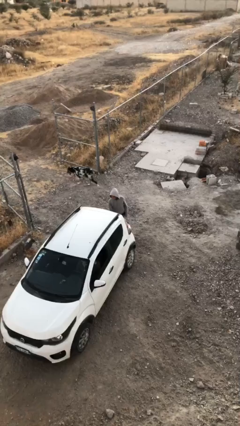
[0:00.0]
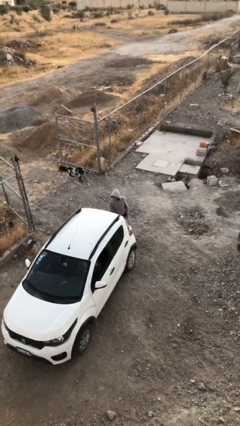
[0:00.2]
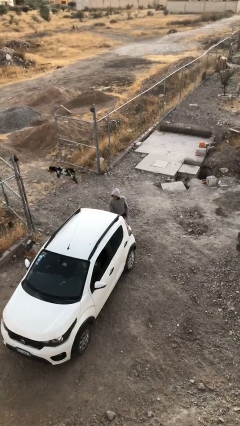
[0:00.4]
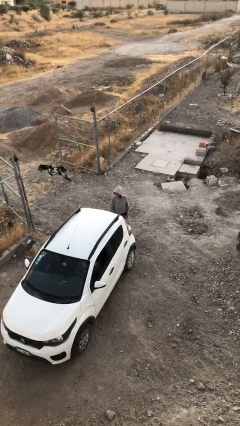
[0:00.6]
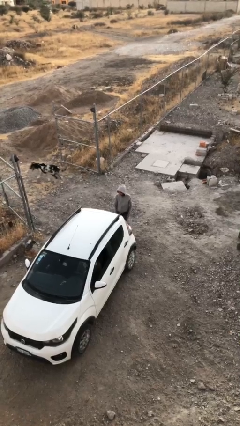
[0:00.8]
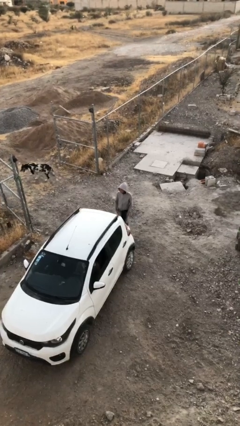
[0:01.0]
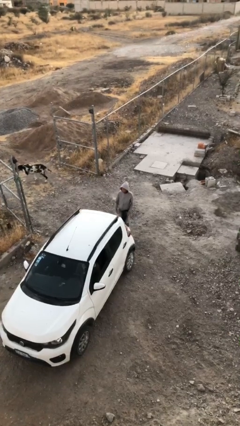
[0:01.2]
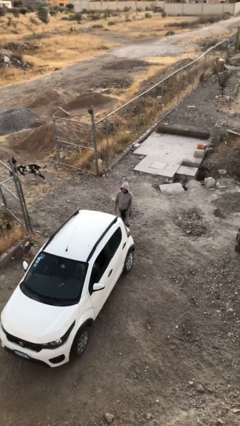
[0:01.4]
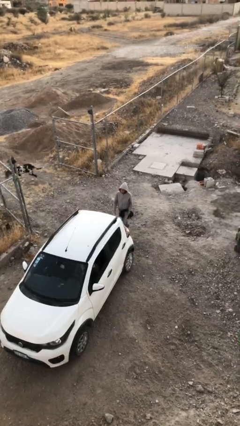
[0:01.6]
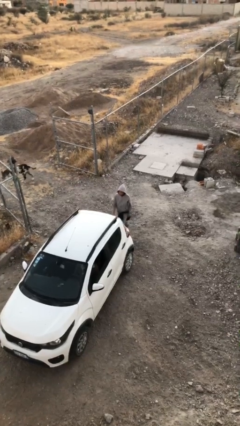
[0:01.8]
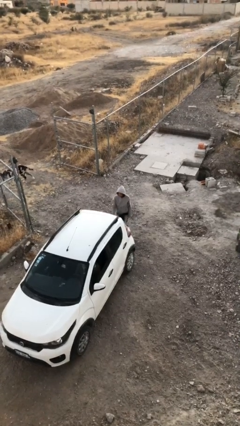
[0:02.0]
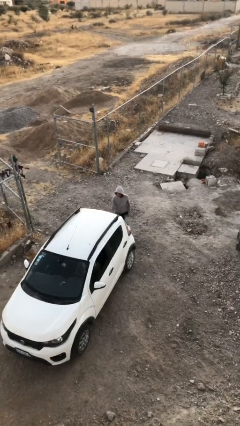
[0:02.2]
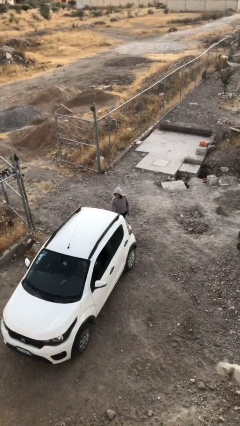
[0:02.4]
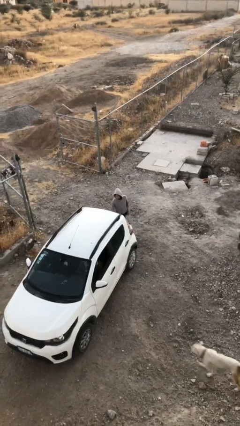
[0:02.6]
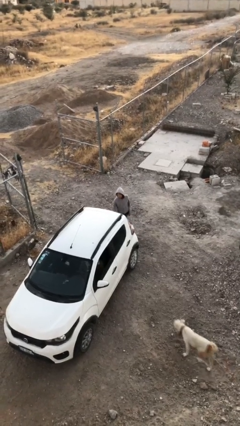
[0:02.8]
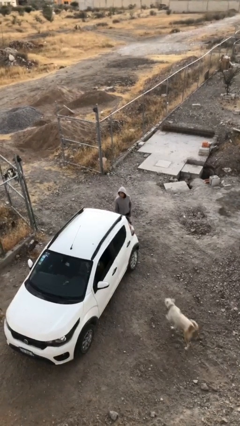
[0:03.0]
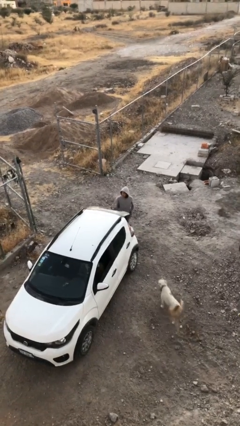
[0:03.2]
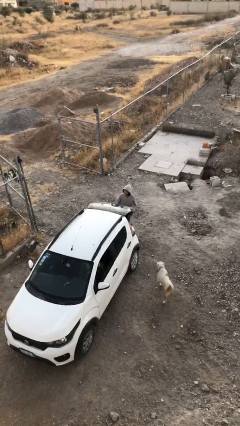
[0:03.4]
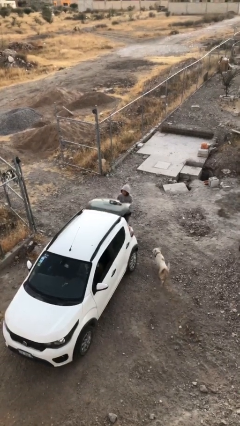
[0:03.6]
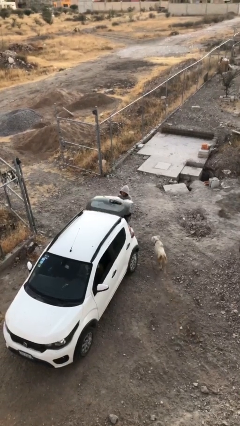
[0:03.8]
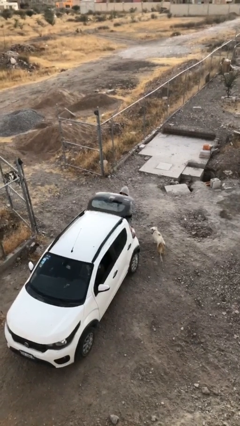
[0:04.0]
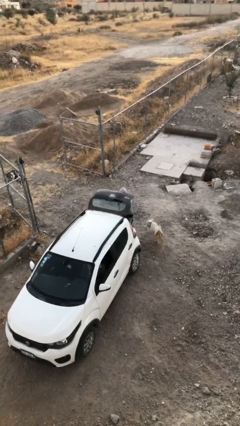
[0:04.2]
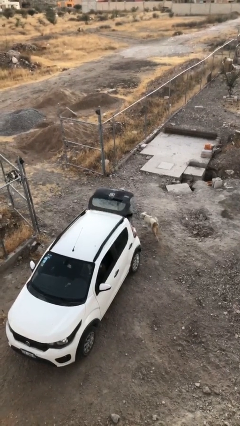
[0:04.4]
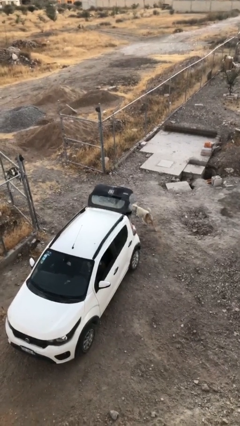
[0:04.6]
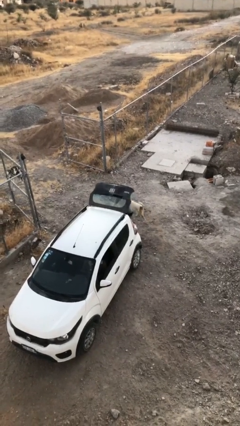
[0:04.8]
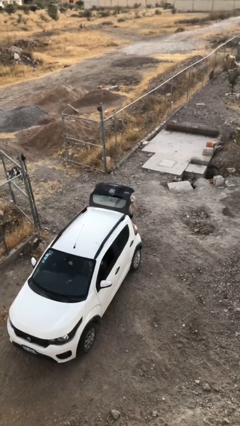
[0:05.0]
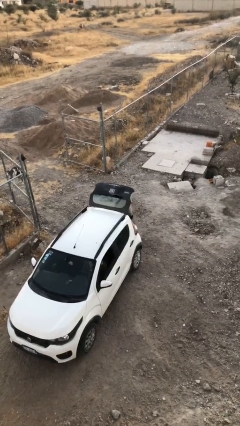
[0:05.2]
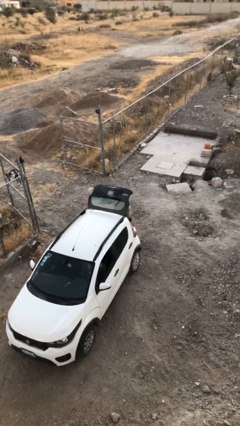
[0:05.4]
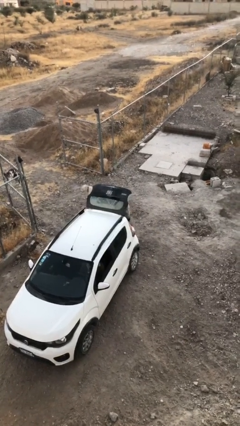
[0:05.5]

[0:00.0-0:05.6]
person opens car trunk

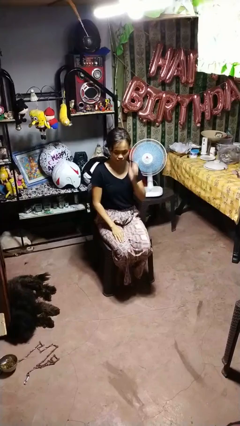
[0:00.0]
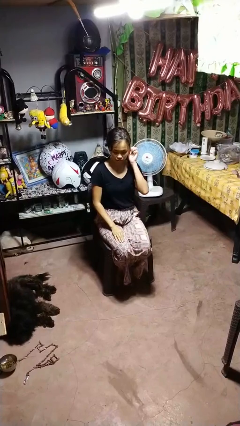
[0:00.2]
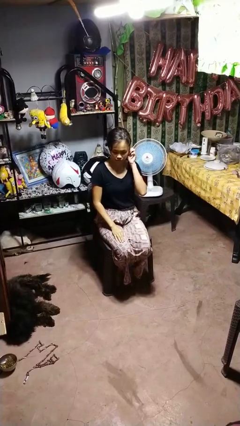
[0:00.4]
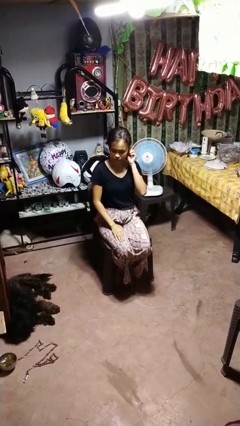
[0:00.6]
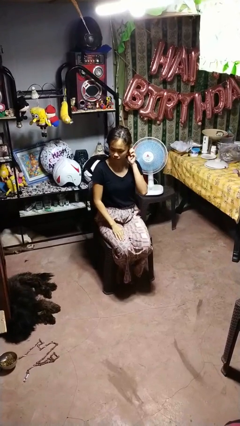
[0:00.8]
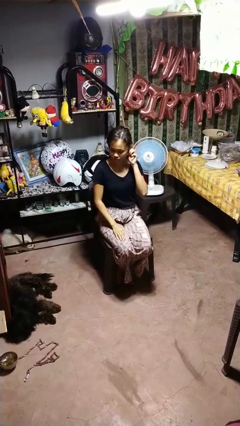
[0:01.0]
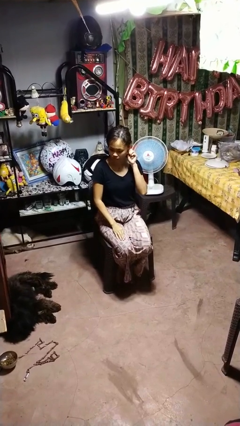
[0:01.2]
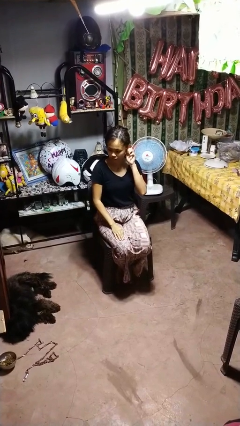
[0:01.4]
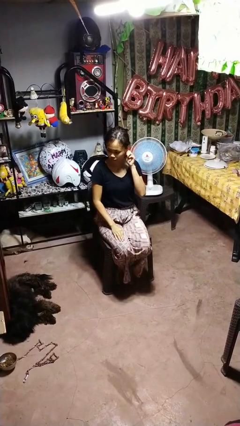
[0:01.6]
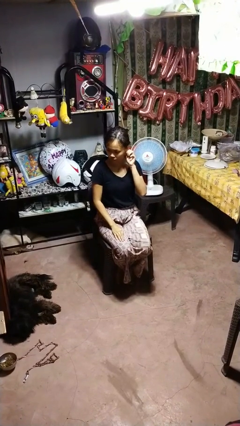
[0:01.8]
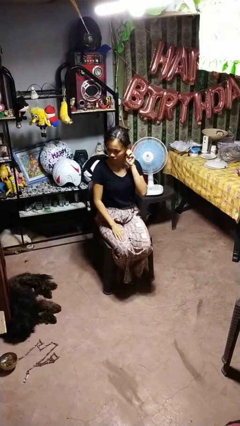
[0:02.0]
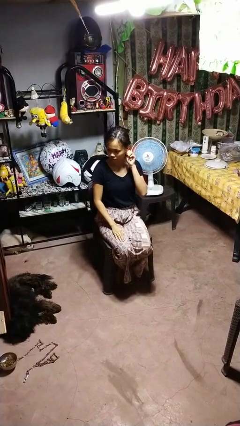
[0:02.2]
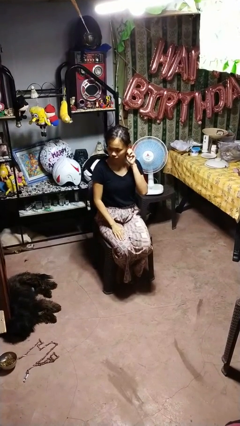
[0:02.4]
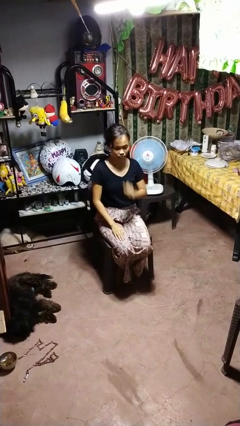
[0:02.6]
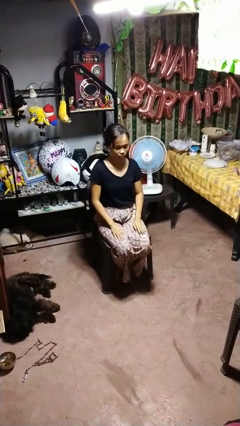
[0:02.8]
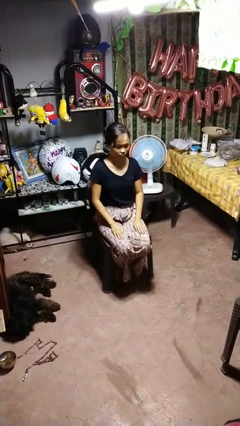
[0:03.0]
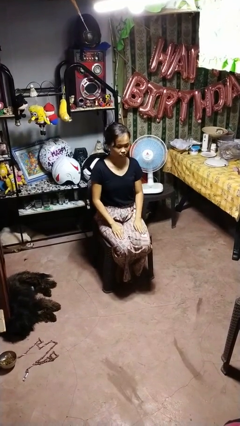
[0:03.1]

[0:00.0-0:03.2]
person touches earlobe

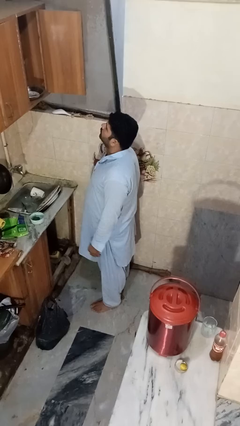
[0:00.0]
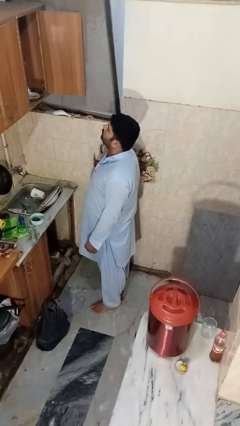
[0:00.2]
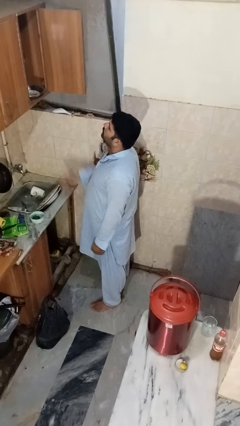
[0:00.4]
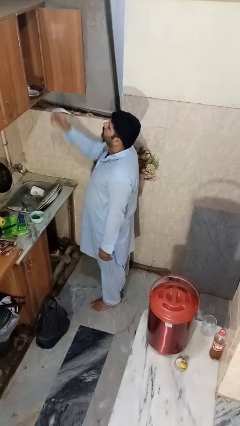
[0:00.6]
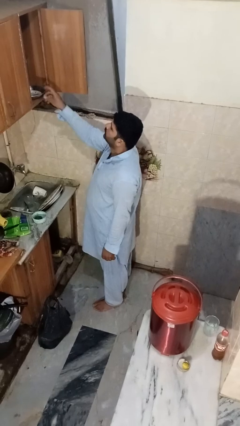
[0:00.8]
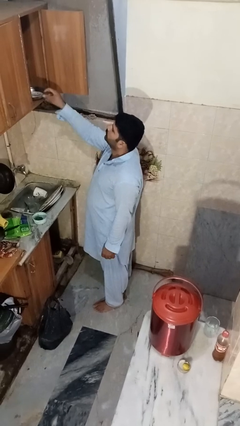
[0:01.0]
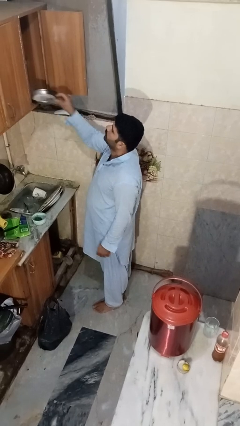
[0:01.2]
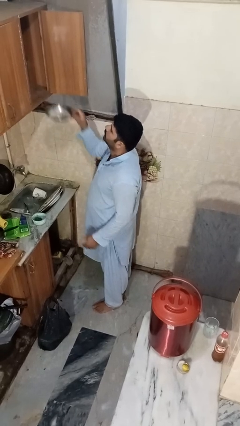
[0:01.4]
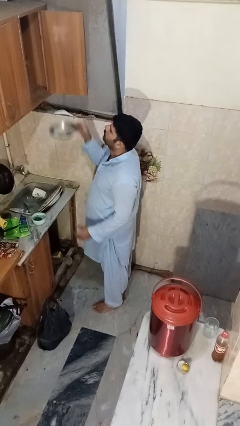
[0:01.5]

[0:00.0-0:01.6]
person takes object from cabinet

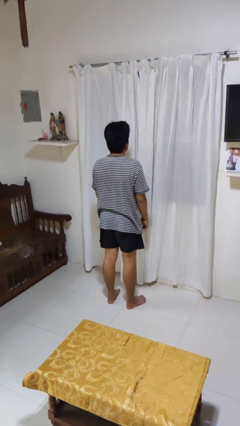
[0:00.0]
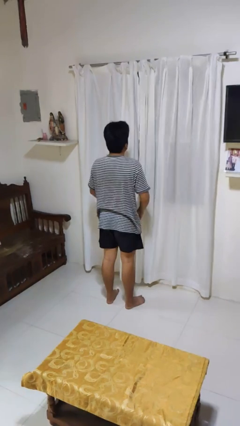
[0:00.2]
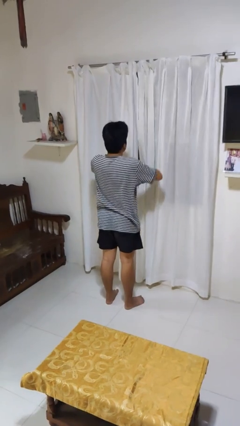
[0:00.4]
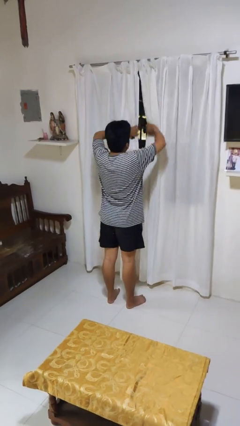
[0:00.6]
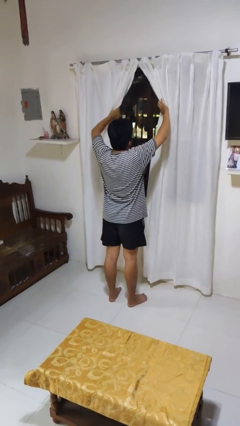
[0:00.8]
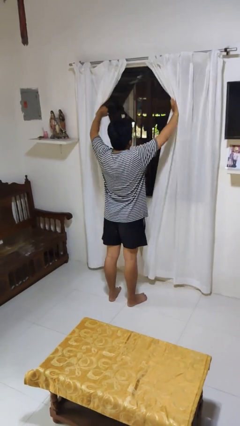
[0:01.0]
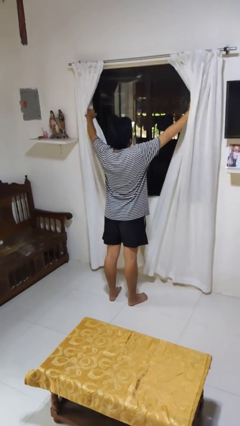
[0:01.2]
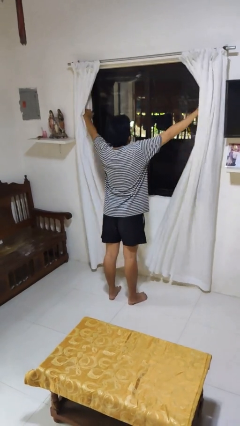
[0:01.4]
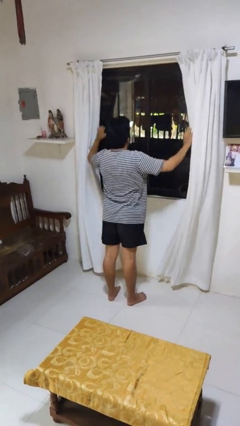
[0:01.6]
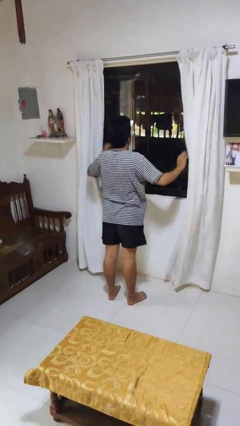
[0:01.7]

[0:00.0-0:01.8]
person opens curtains

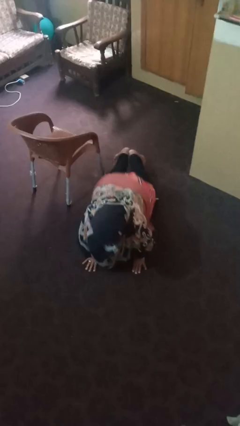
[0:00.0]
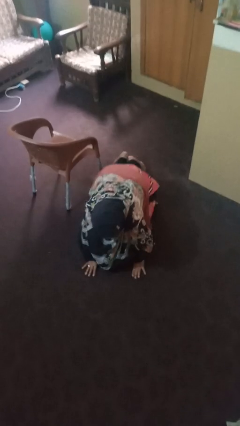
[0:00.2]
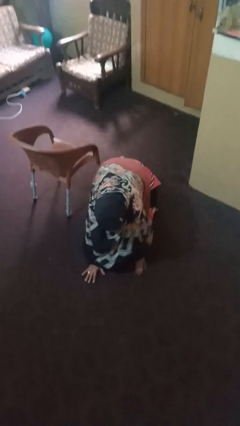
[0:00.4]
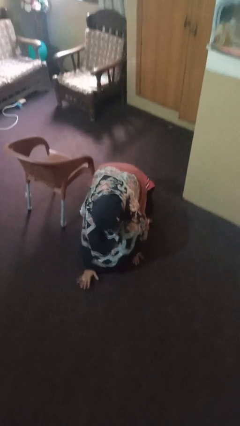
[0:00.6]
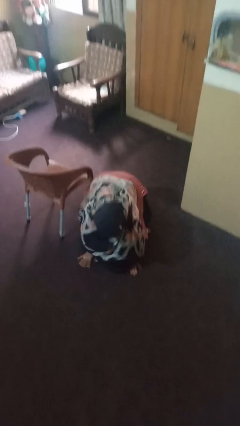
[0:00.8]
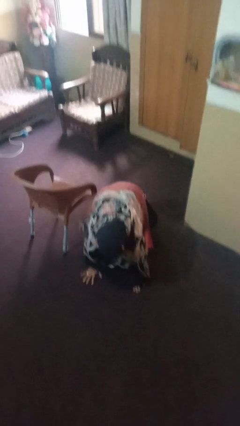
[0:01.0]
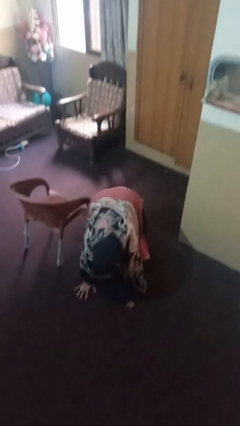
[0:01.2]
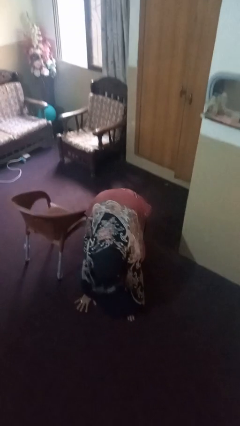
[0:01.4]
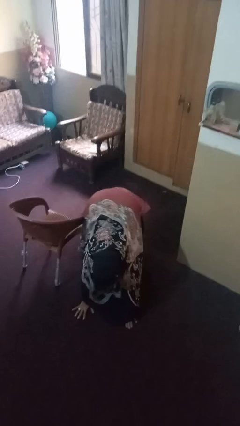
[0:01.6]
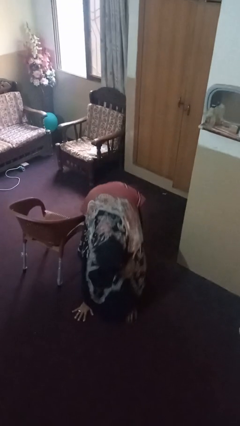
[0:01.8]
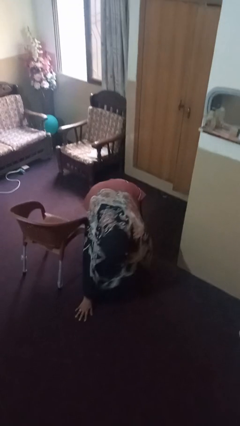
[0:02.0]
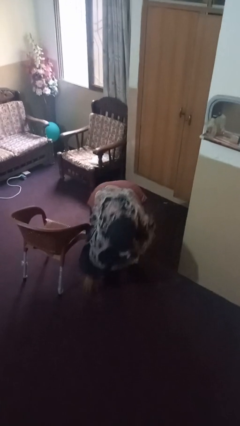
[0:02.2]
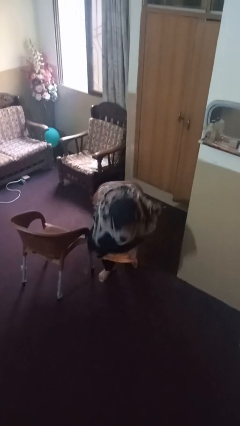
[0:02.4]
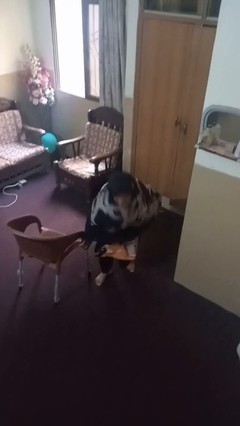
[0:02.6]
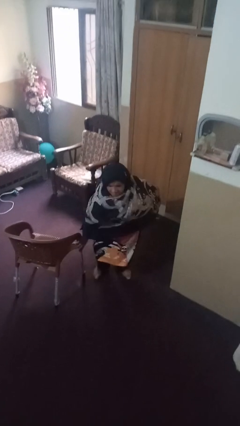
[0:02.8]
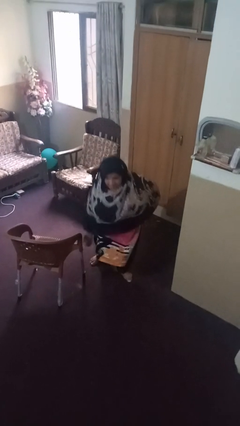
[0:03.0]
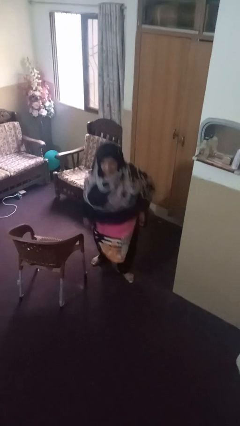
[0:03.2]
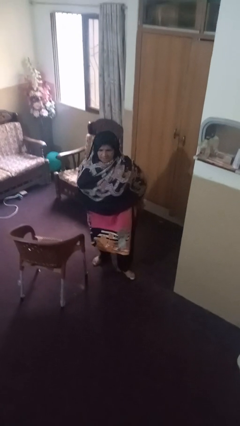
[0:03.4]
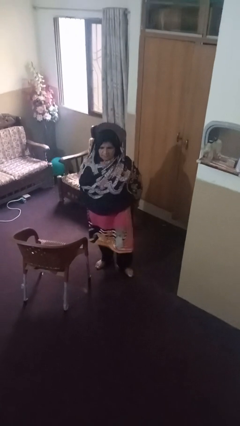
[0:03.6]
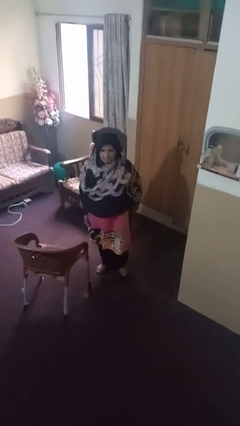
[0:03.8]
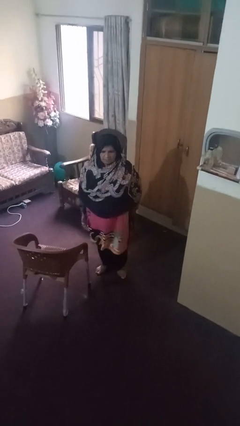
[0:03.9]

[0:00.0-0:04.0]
person stands up from floor

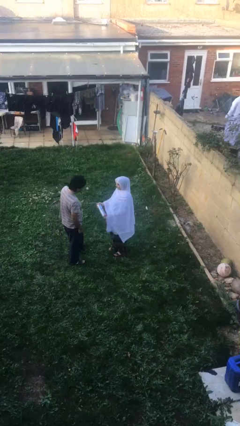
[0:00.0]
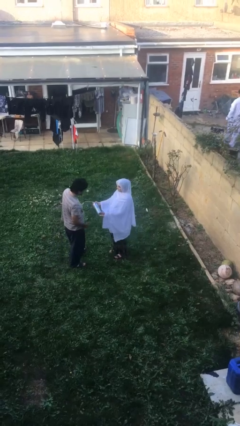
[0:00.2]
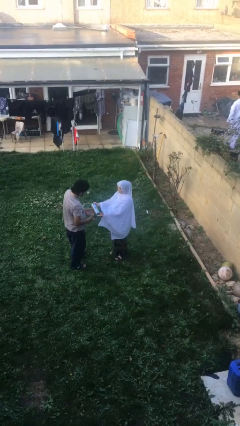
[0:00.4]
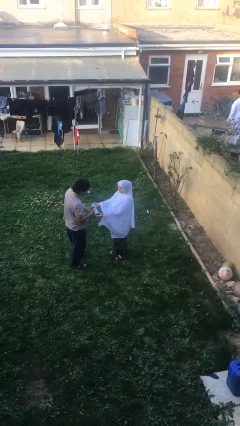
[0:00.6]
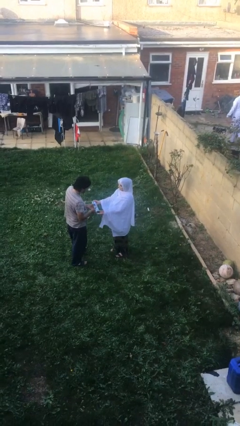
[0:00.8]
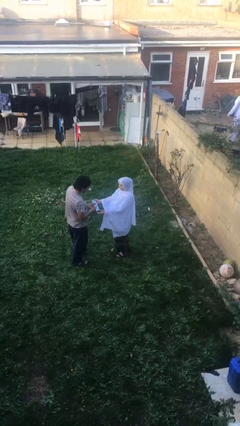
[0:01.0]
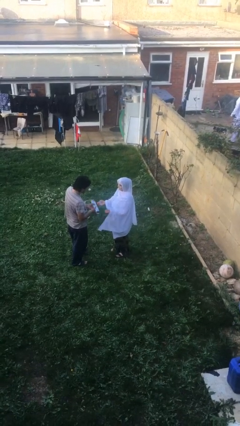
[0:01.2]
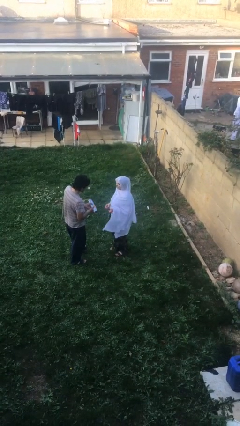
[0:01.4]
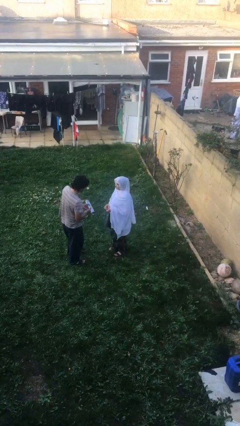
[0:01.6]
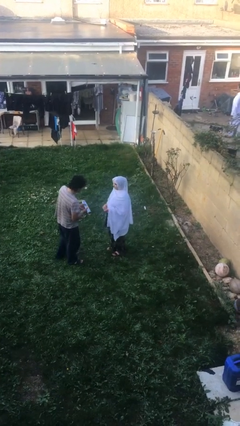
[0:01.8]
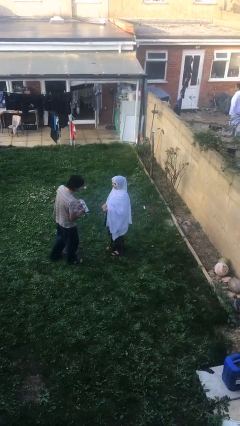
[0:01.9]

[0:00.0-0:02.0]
person transfers object to person
